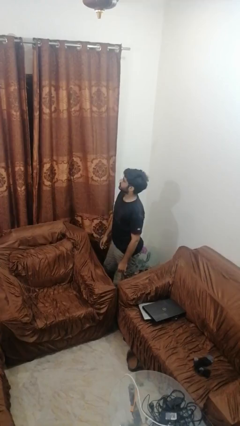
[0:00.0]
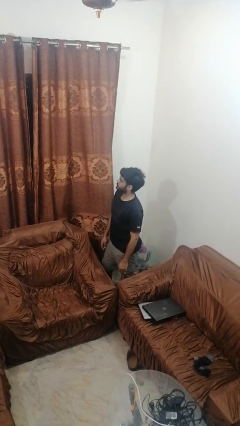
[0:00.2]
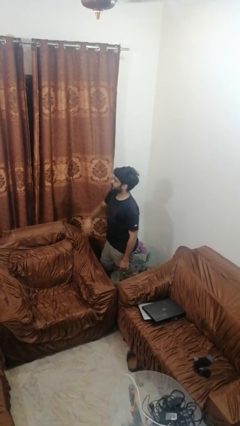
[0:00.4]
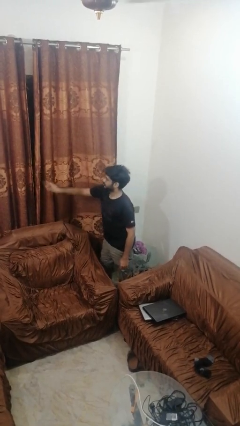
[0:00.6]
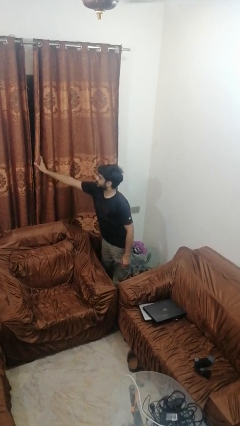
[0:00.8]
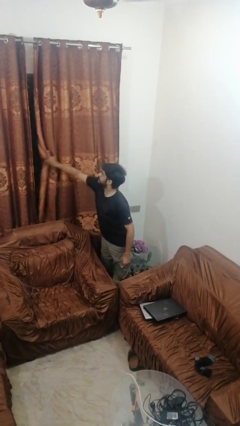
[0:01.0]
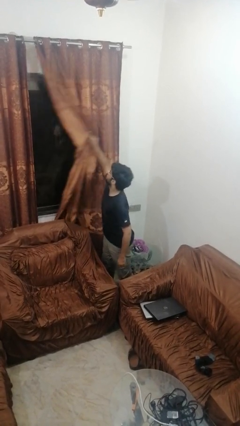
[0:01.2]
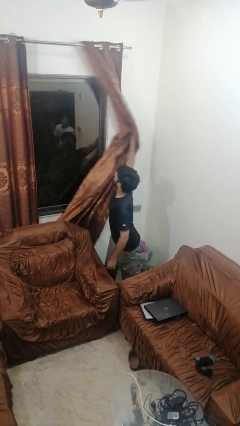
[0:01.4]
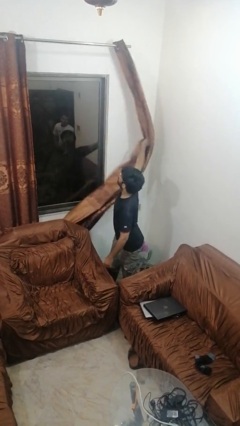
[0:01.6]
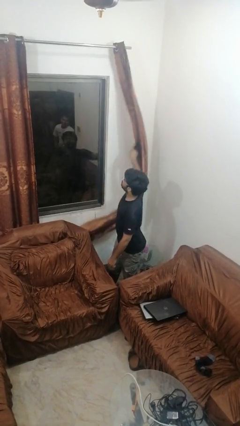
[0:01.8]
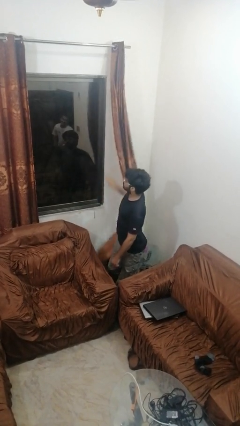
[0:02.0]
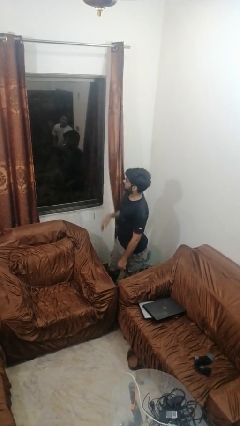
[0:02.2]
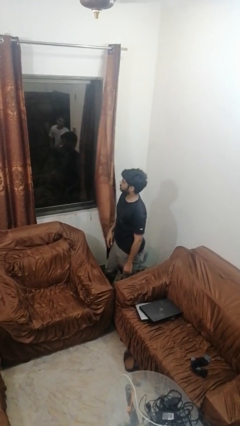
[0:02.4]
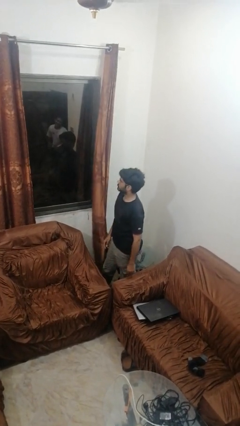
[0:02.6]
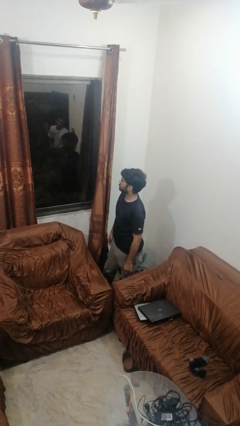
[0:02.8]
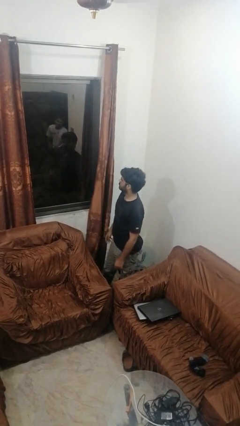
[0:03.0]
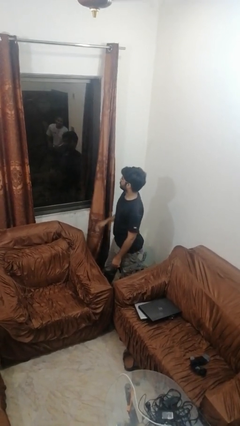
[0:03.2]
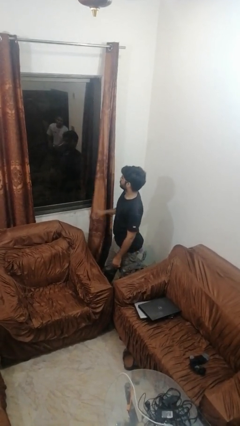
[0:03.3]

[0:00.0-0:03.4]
person opens curtains

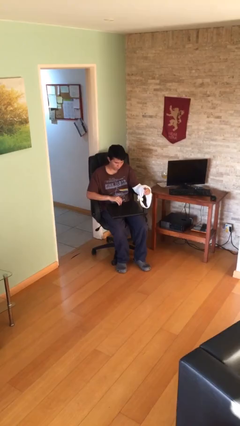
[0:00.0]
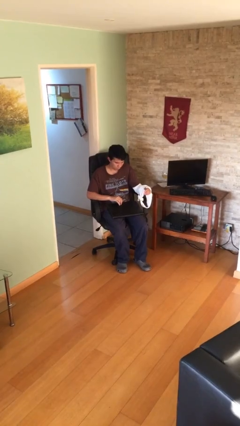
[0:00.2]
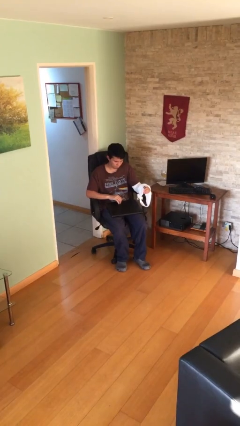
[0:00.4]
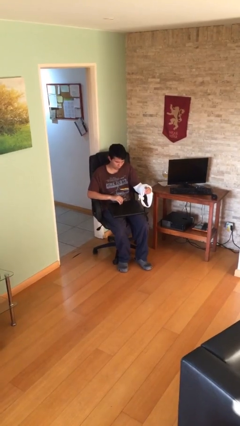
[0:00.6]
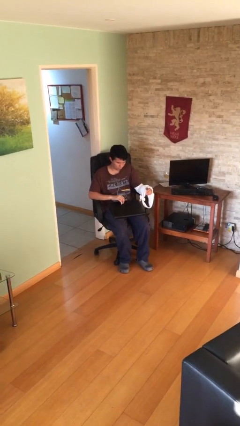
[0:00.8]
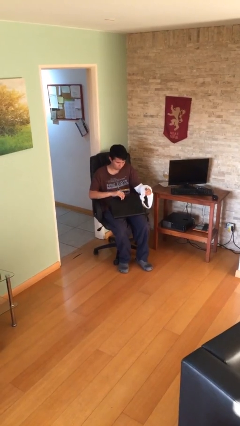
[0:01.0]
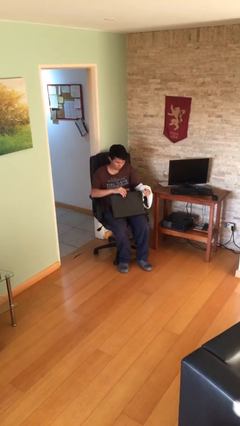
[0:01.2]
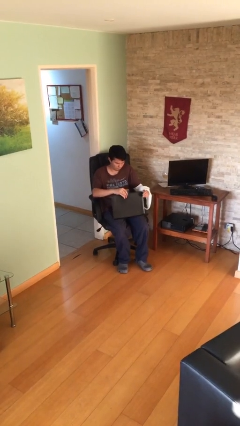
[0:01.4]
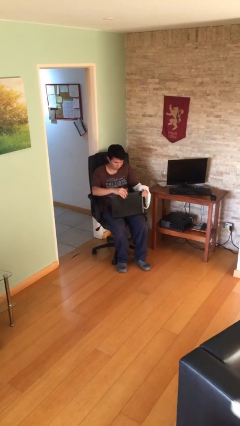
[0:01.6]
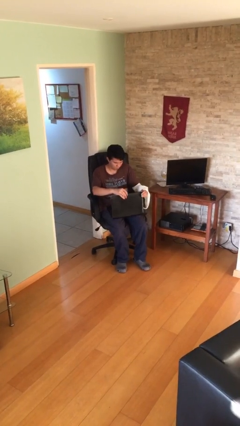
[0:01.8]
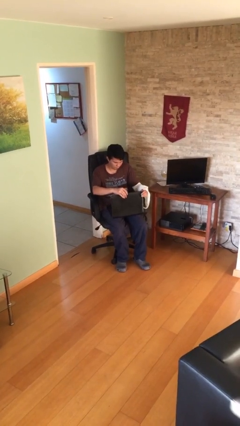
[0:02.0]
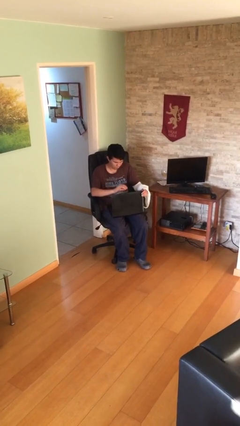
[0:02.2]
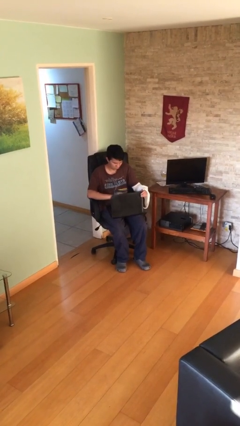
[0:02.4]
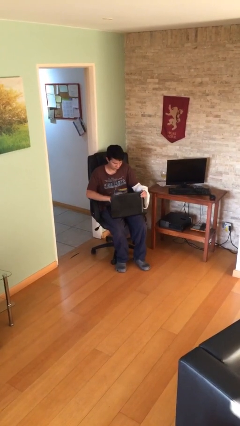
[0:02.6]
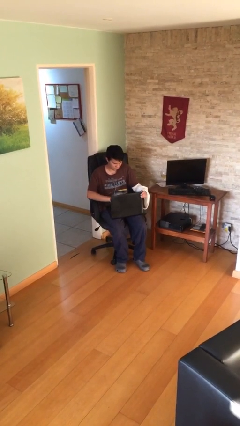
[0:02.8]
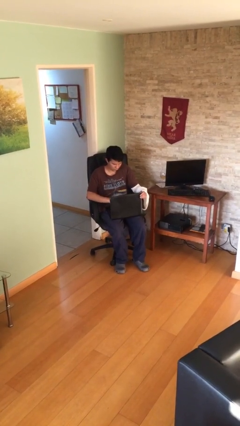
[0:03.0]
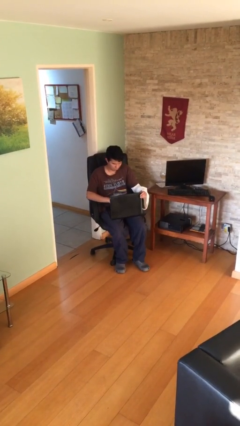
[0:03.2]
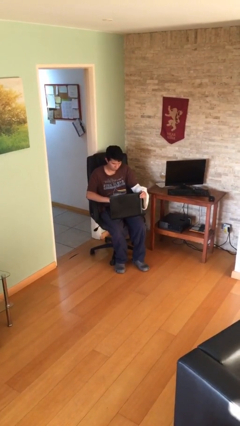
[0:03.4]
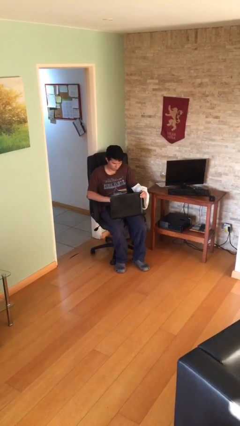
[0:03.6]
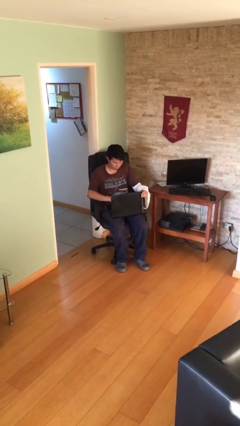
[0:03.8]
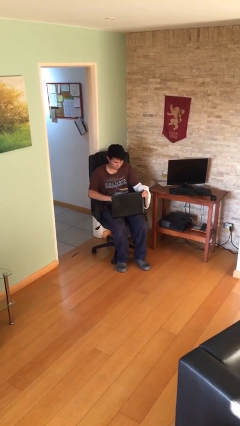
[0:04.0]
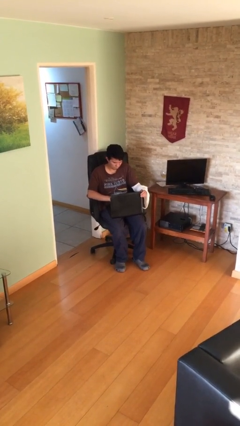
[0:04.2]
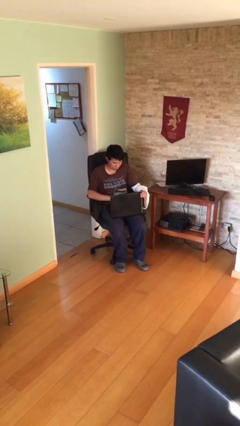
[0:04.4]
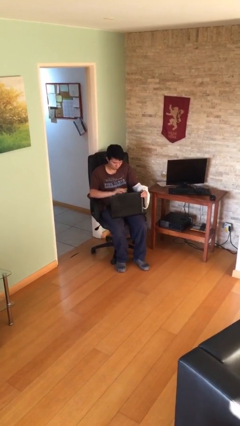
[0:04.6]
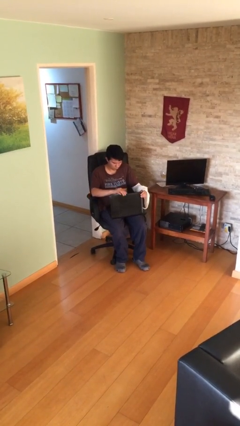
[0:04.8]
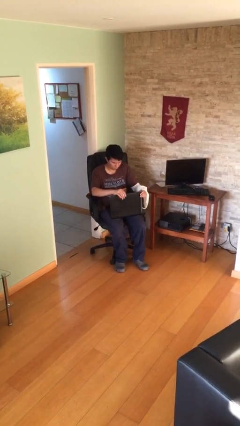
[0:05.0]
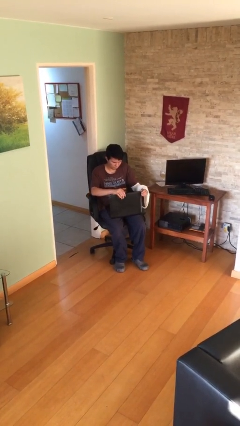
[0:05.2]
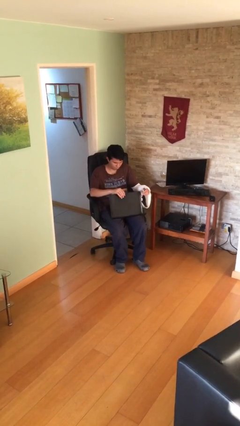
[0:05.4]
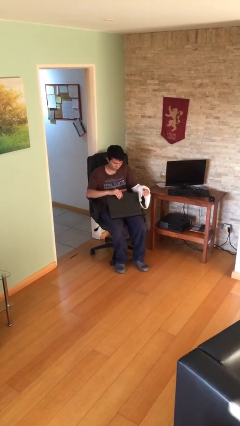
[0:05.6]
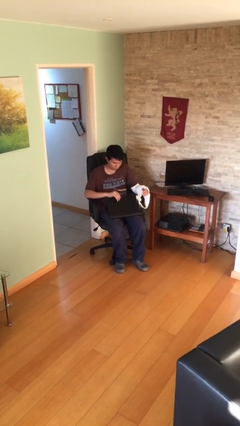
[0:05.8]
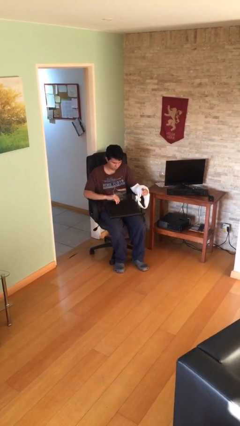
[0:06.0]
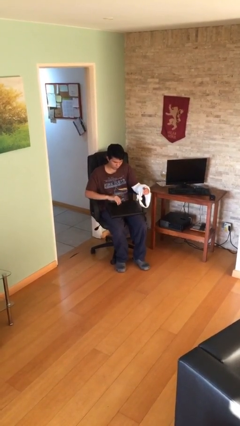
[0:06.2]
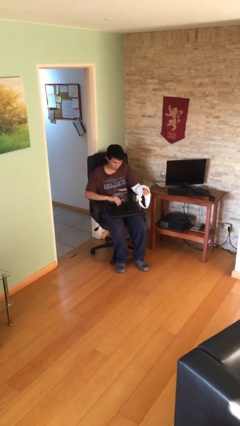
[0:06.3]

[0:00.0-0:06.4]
person interacts with laptop

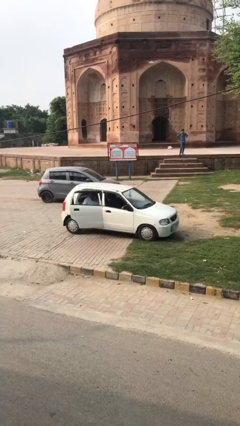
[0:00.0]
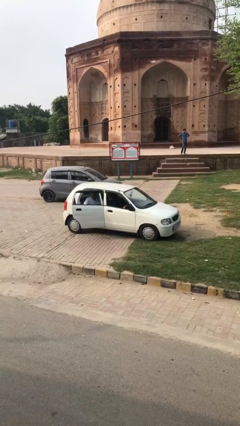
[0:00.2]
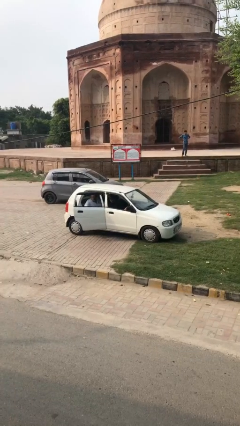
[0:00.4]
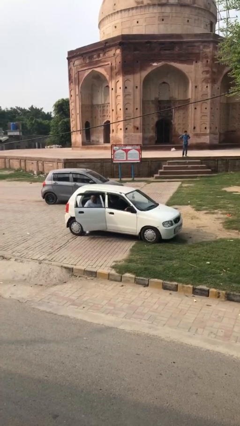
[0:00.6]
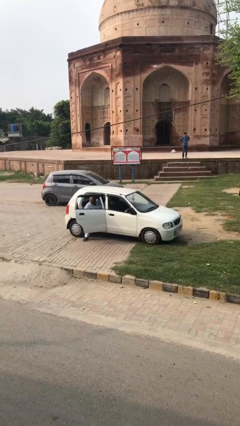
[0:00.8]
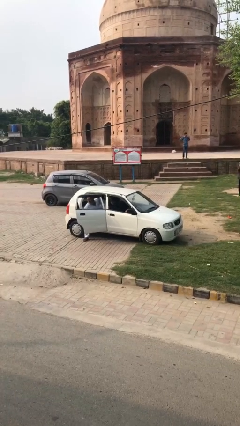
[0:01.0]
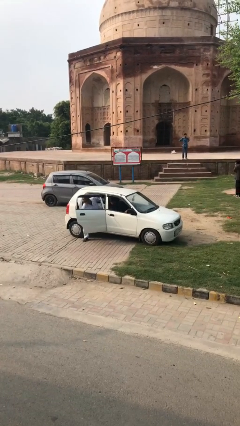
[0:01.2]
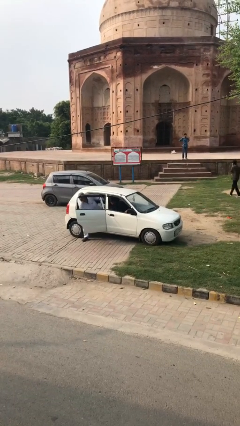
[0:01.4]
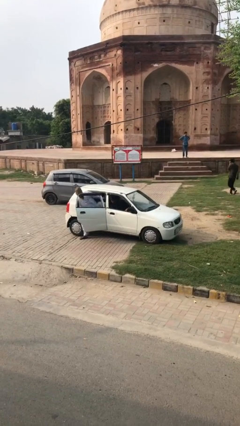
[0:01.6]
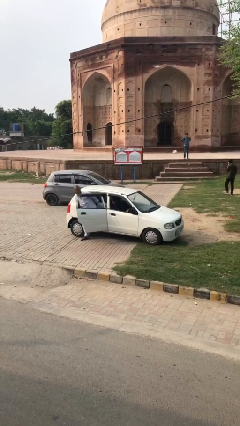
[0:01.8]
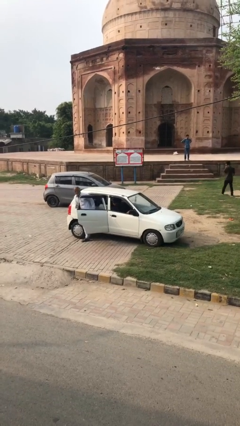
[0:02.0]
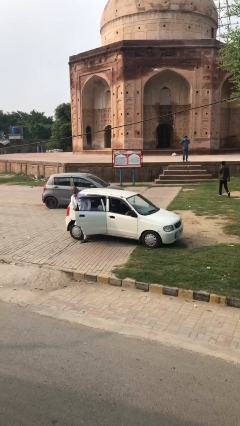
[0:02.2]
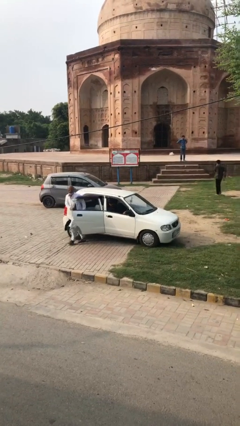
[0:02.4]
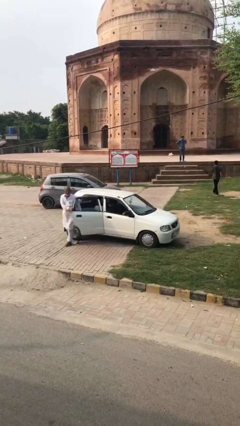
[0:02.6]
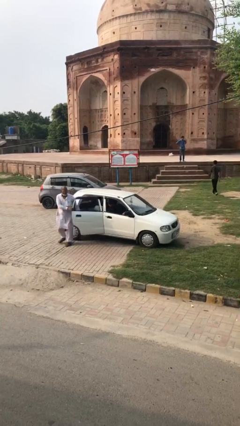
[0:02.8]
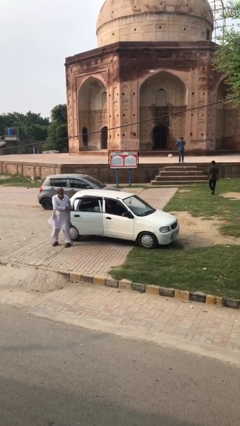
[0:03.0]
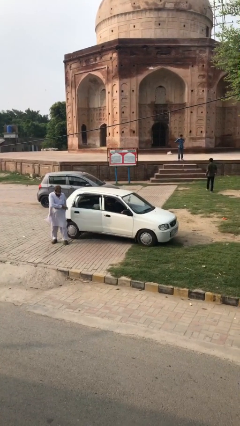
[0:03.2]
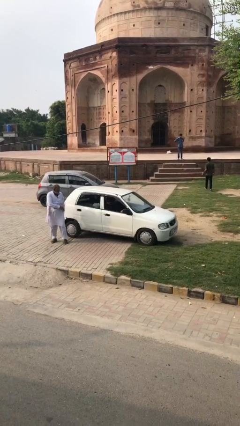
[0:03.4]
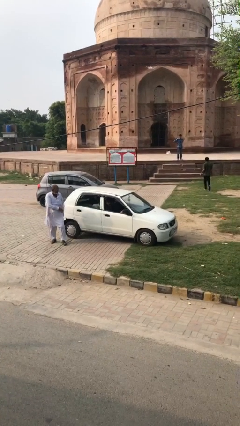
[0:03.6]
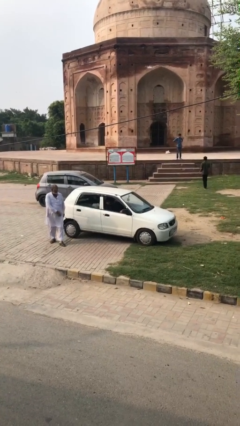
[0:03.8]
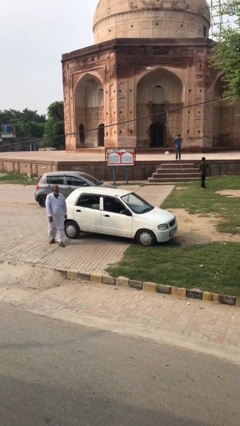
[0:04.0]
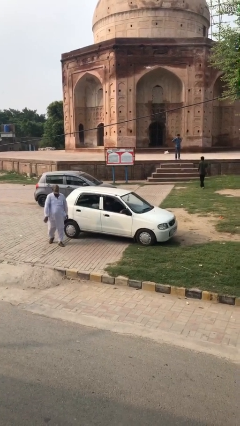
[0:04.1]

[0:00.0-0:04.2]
car drops off person

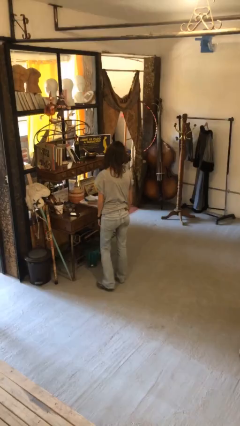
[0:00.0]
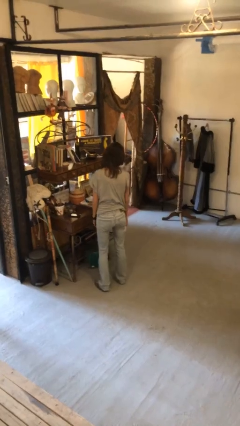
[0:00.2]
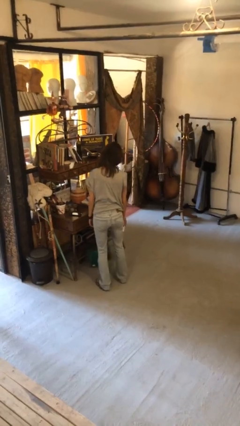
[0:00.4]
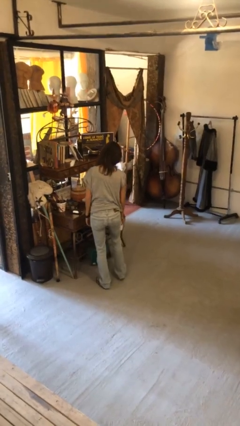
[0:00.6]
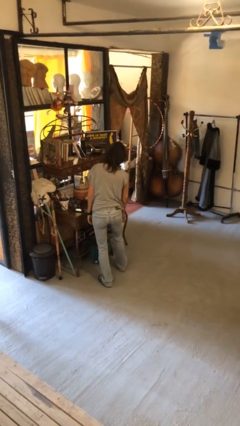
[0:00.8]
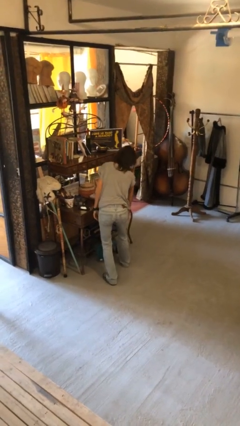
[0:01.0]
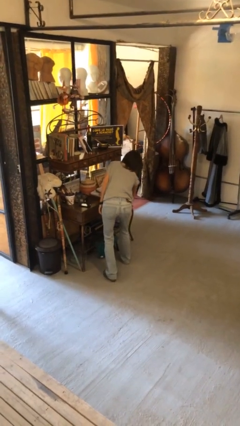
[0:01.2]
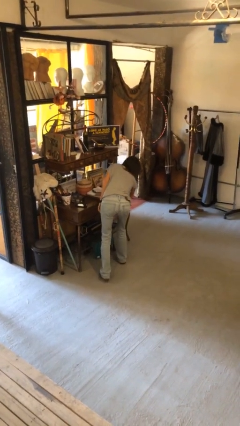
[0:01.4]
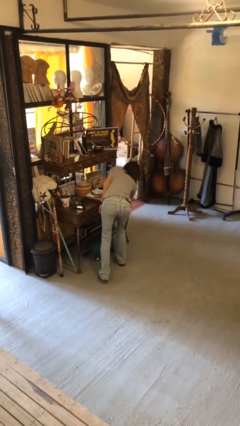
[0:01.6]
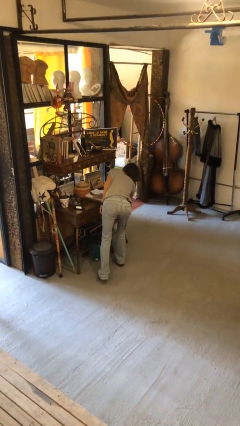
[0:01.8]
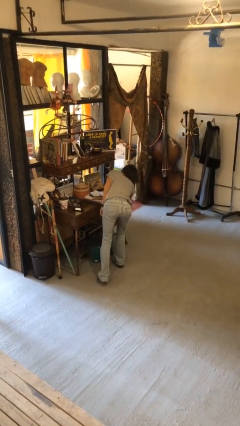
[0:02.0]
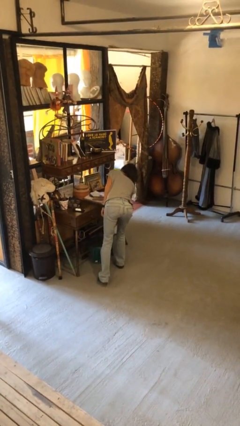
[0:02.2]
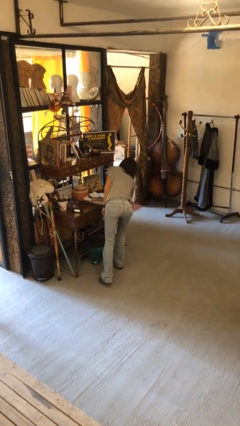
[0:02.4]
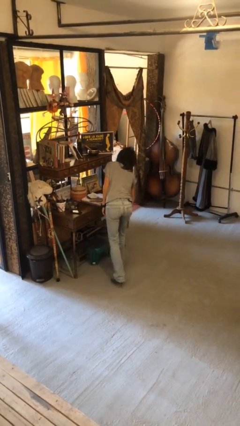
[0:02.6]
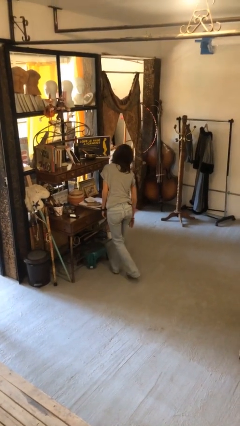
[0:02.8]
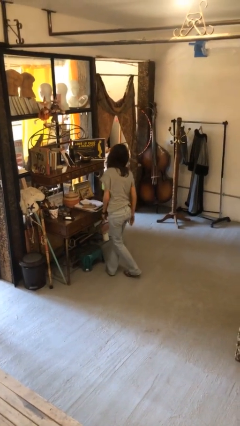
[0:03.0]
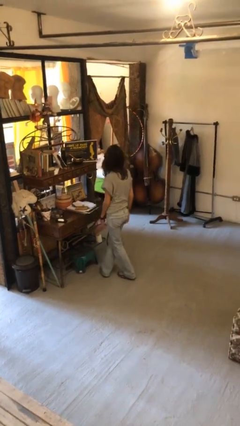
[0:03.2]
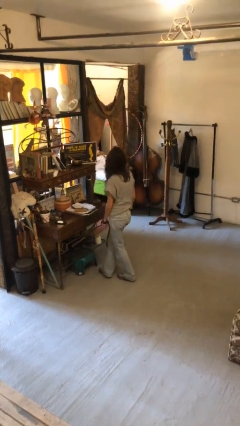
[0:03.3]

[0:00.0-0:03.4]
person puts down object into cabinet

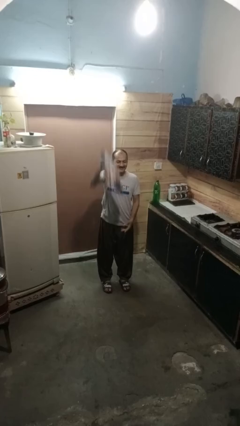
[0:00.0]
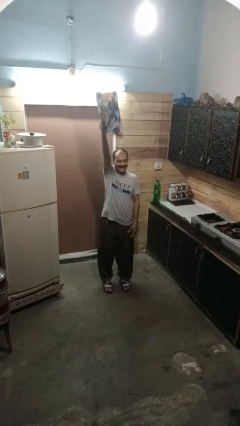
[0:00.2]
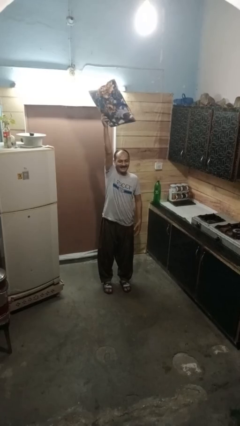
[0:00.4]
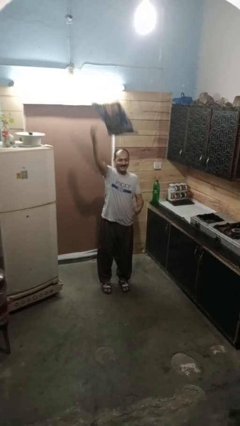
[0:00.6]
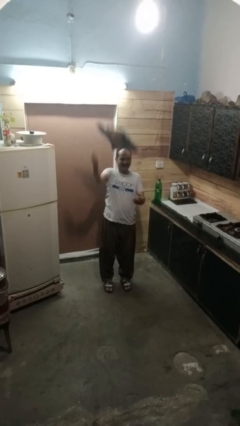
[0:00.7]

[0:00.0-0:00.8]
person drops object
